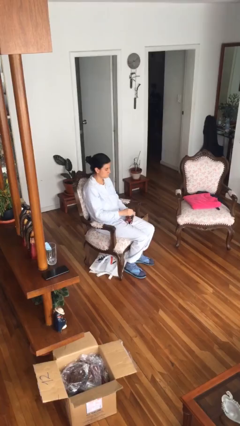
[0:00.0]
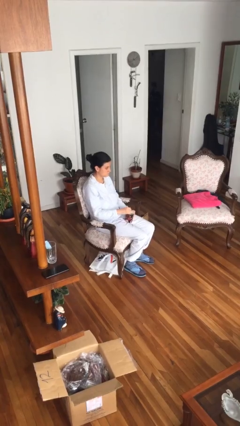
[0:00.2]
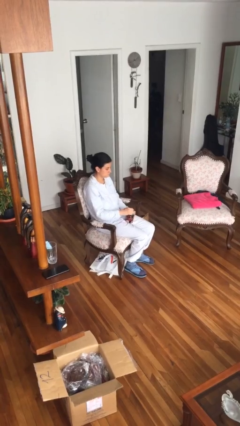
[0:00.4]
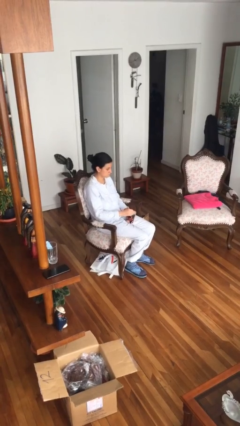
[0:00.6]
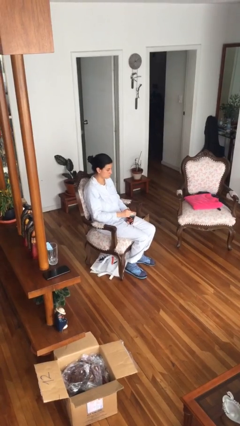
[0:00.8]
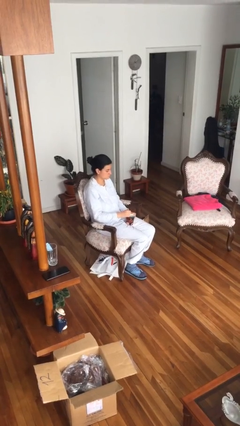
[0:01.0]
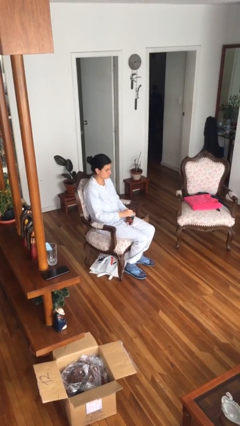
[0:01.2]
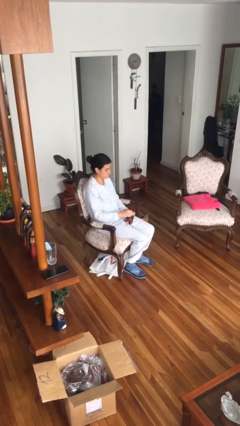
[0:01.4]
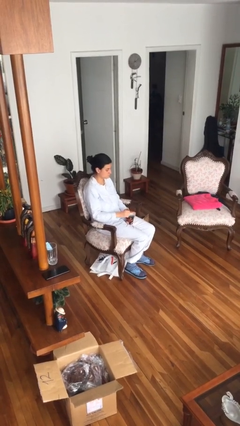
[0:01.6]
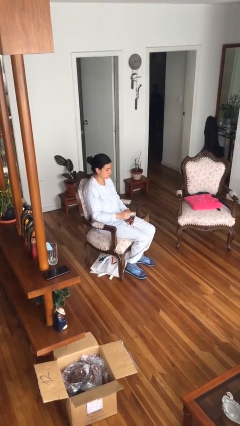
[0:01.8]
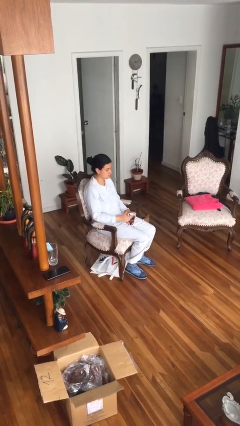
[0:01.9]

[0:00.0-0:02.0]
person stirs mug

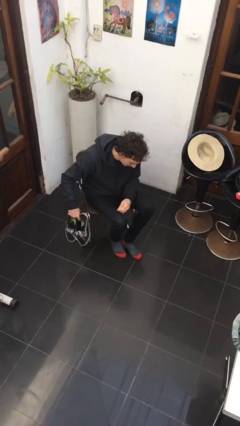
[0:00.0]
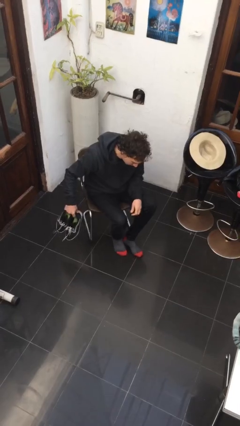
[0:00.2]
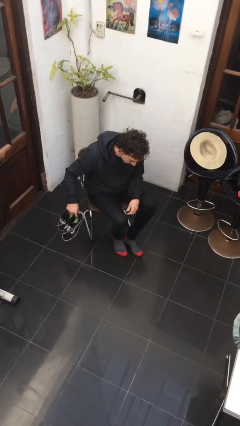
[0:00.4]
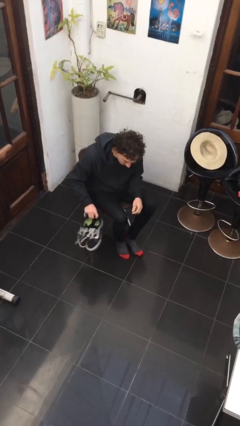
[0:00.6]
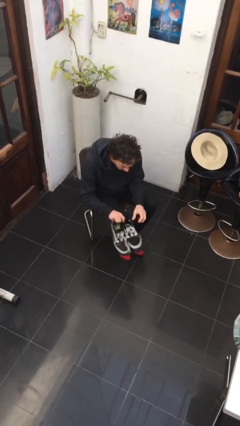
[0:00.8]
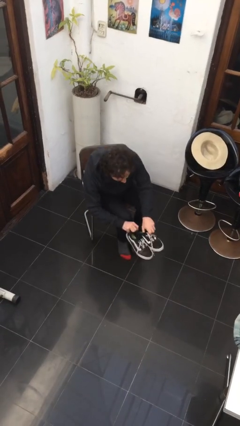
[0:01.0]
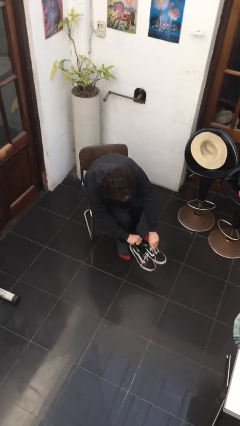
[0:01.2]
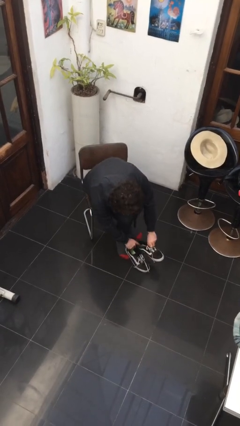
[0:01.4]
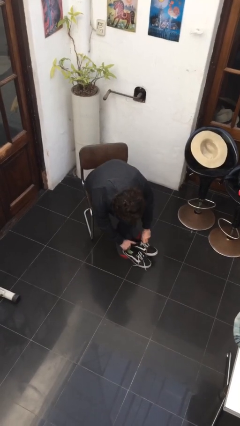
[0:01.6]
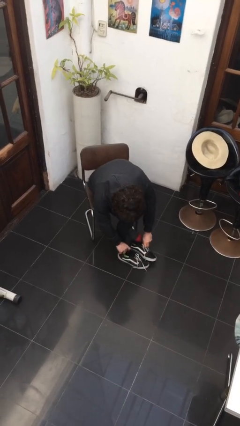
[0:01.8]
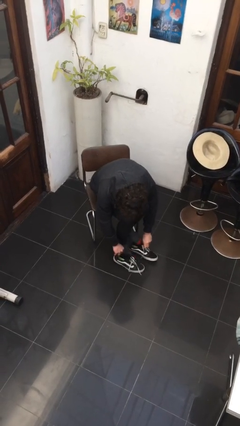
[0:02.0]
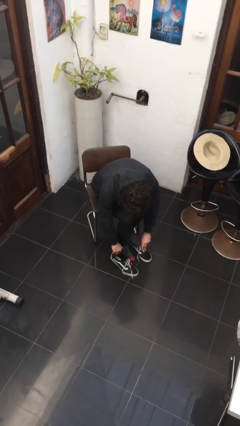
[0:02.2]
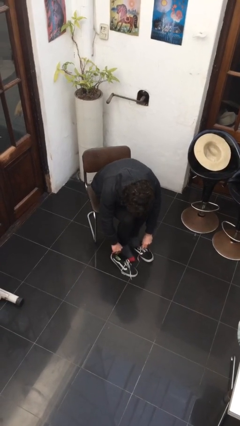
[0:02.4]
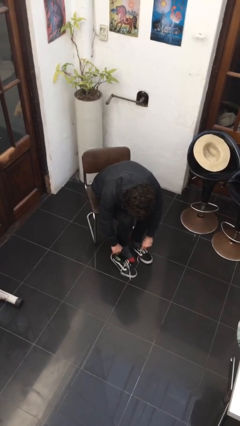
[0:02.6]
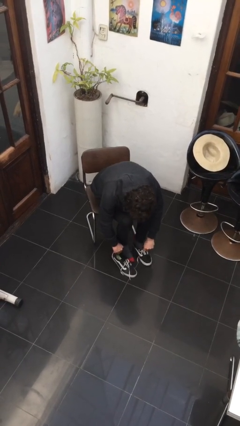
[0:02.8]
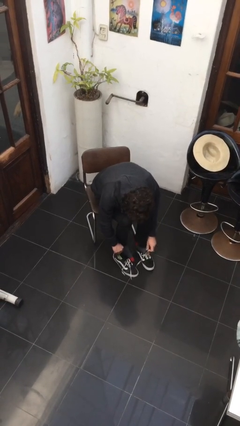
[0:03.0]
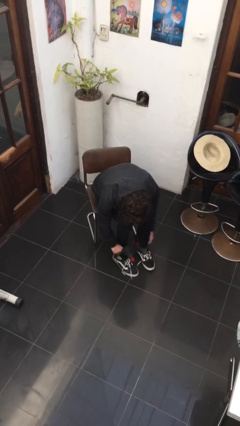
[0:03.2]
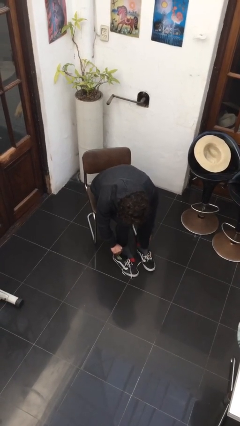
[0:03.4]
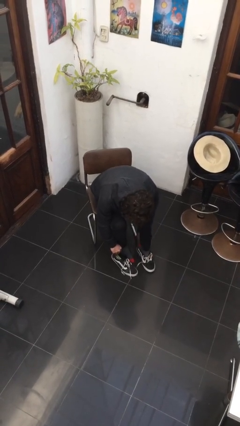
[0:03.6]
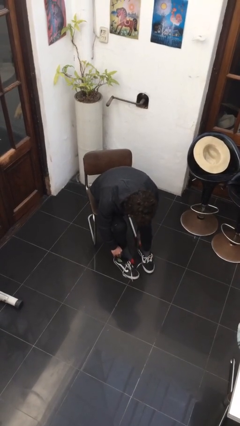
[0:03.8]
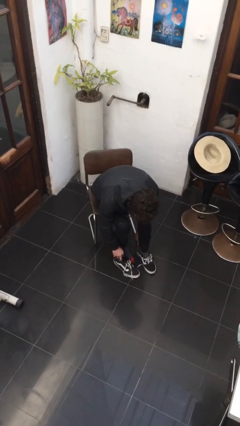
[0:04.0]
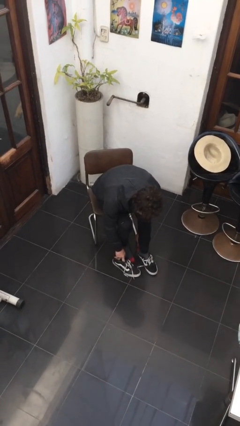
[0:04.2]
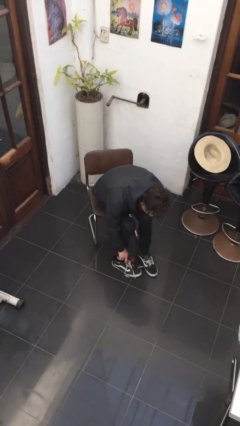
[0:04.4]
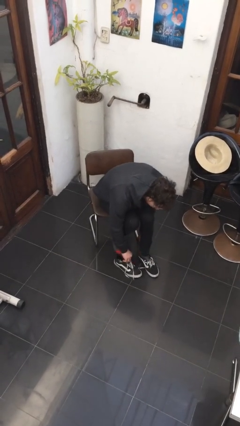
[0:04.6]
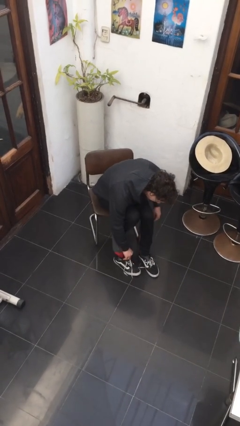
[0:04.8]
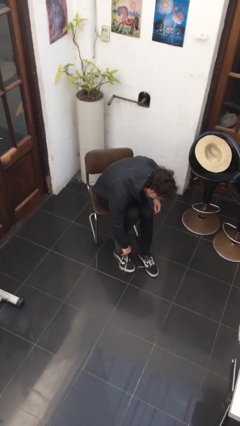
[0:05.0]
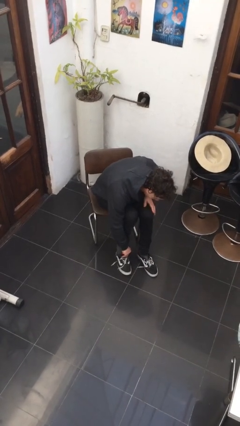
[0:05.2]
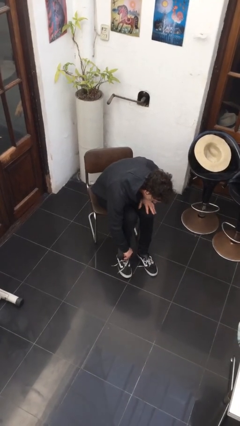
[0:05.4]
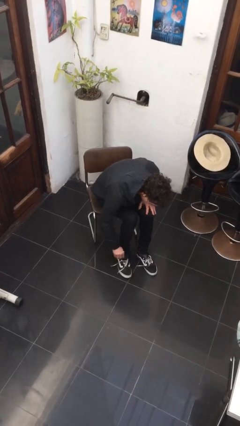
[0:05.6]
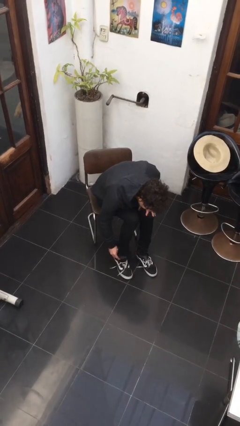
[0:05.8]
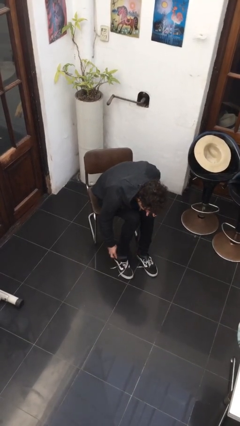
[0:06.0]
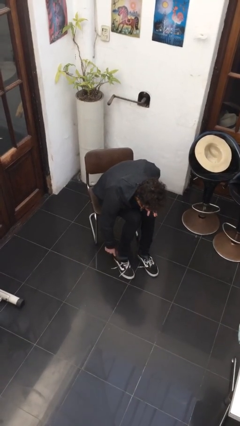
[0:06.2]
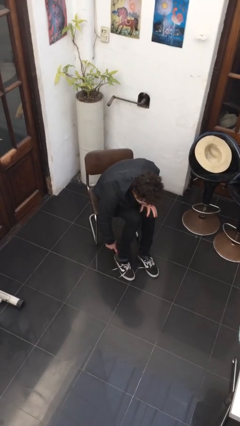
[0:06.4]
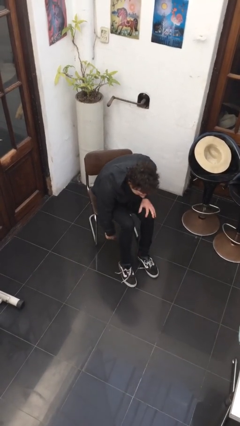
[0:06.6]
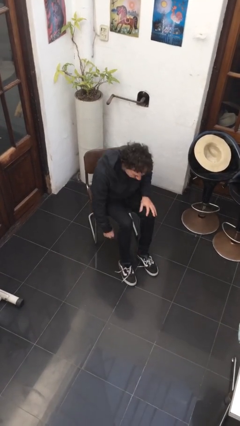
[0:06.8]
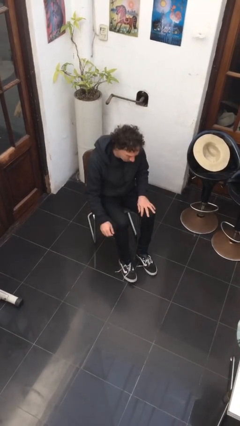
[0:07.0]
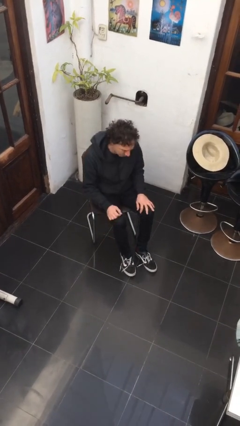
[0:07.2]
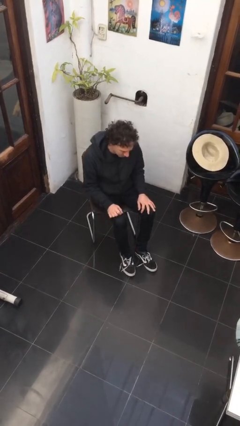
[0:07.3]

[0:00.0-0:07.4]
person puts on shoes

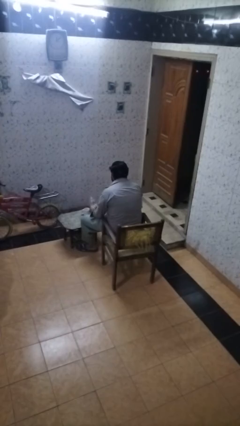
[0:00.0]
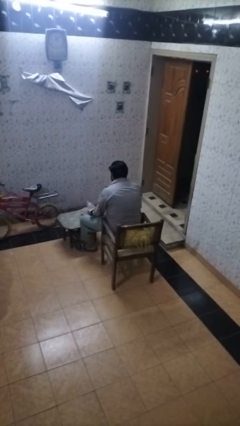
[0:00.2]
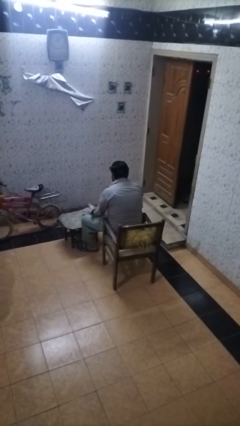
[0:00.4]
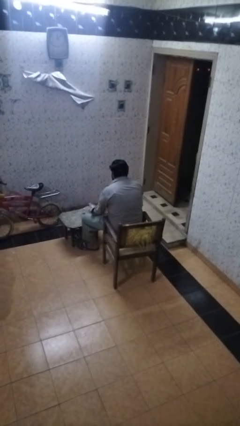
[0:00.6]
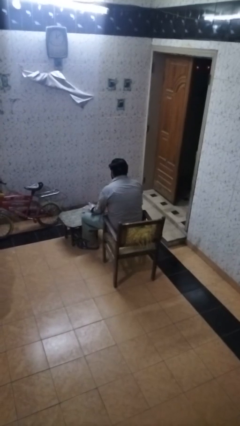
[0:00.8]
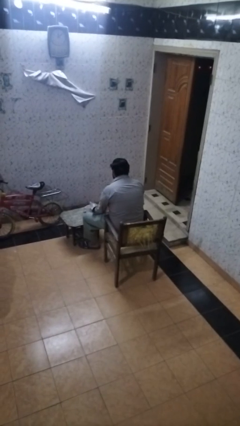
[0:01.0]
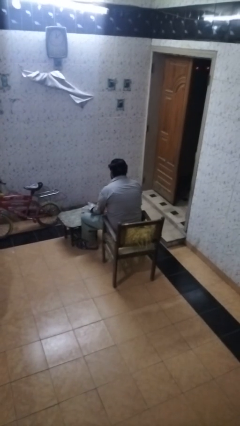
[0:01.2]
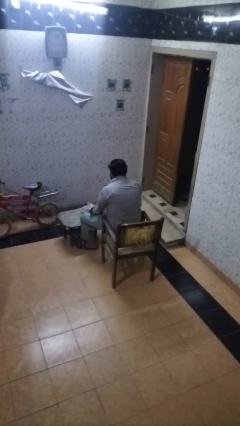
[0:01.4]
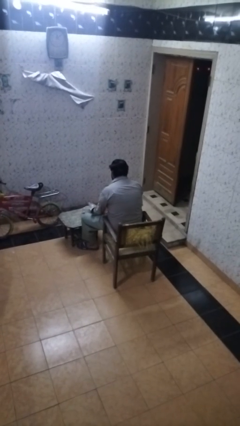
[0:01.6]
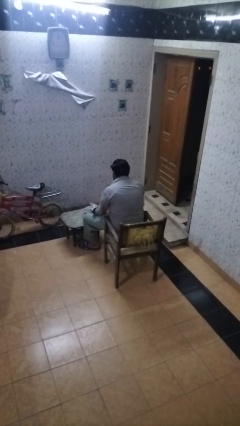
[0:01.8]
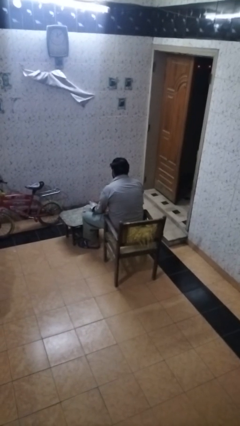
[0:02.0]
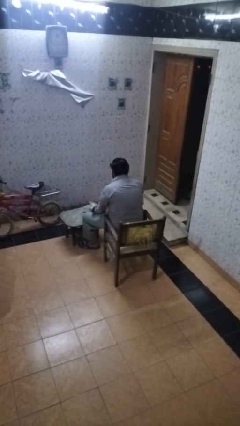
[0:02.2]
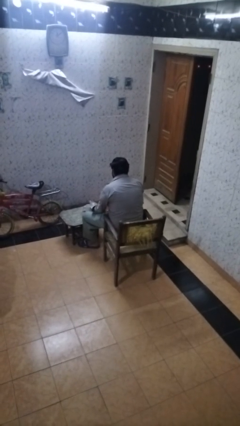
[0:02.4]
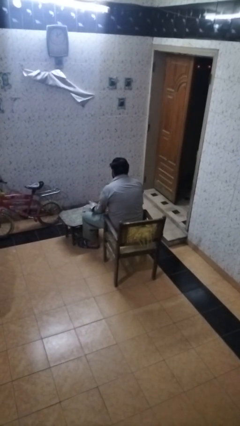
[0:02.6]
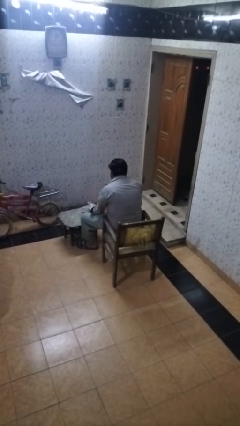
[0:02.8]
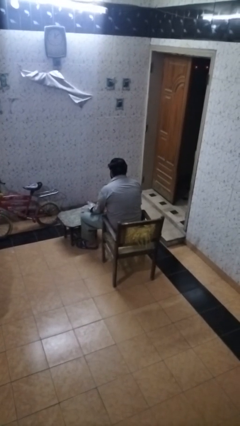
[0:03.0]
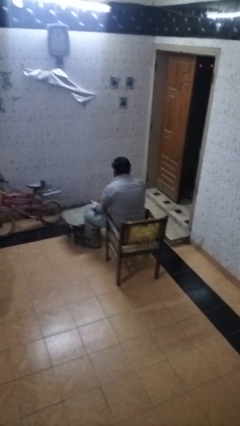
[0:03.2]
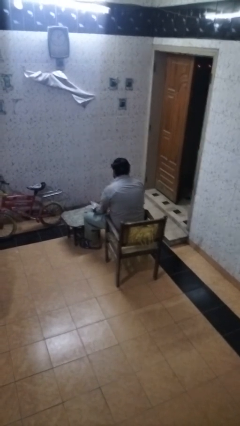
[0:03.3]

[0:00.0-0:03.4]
person pours liquid into cup

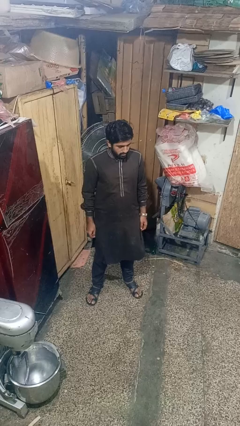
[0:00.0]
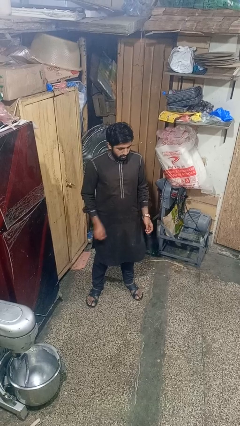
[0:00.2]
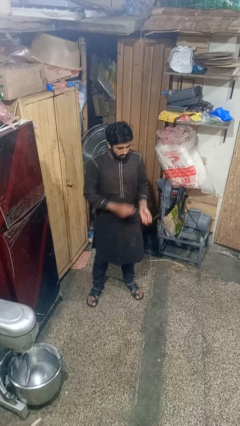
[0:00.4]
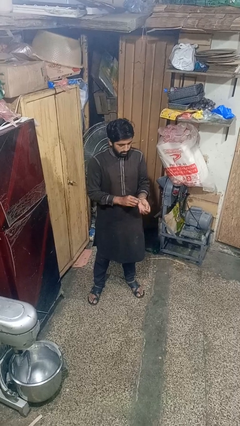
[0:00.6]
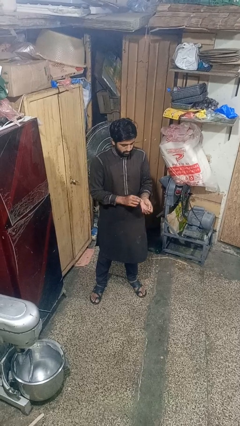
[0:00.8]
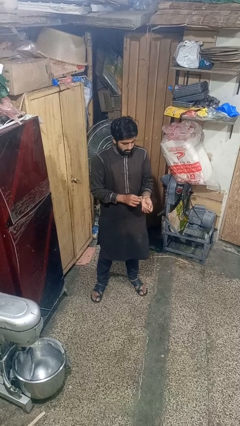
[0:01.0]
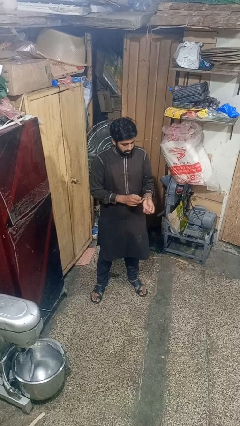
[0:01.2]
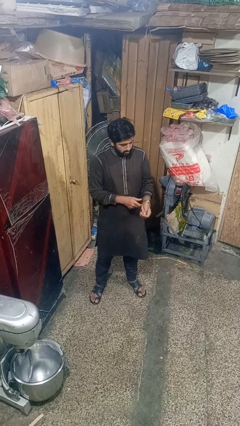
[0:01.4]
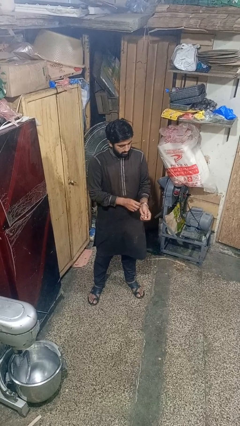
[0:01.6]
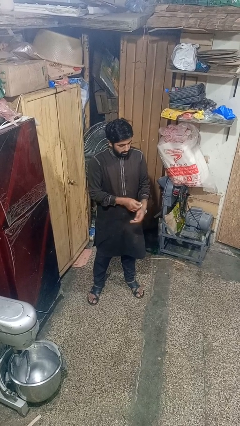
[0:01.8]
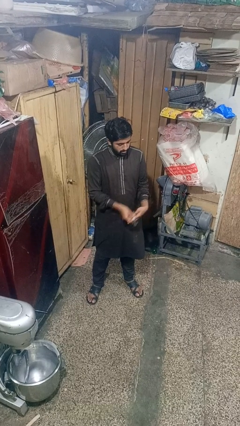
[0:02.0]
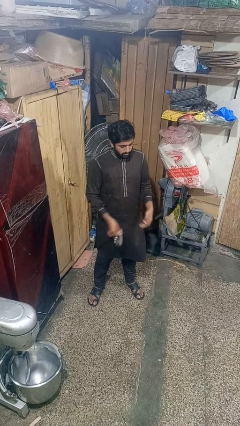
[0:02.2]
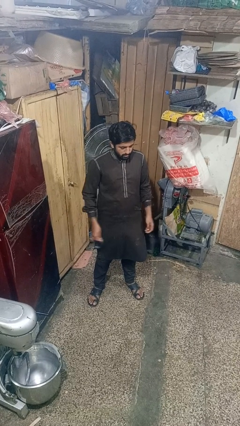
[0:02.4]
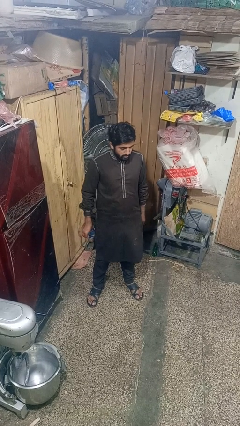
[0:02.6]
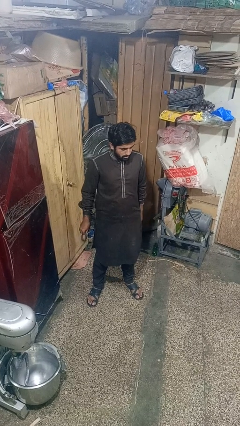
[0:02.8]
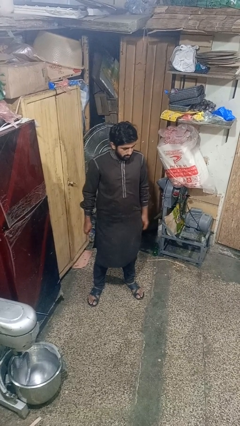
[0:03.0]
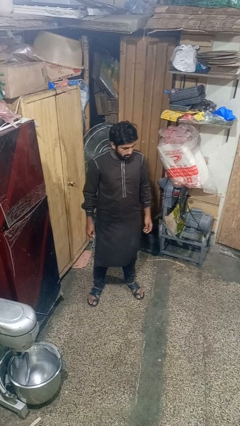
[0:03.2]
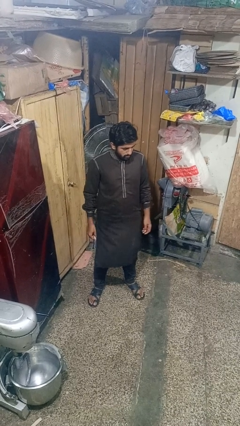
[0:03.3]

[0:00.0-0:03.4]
person takes off wristwatch

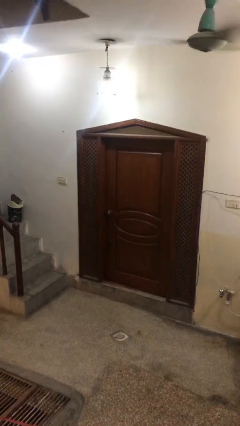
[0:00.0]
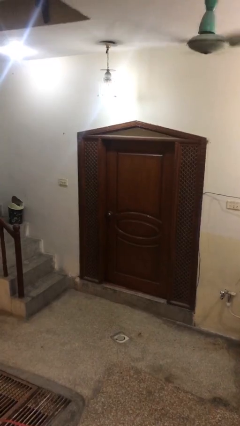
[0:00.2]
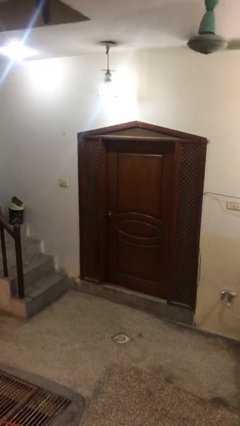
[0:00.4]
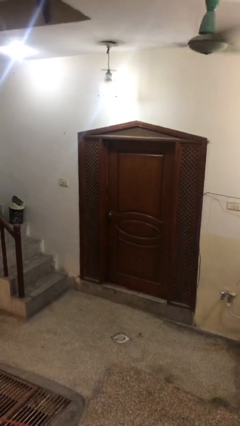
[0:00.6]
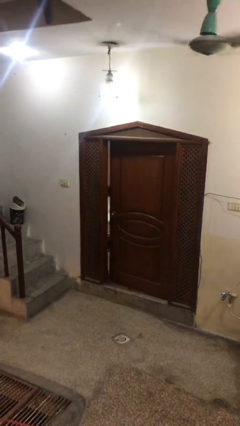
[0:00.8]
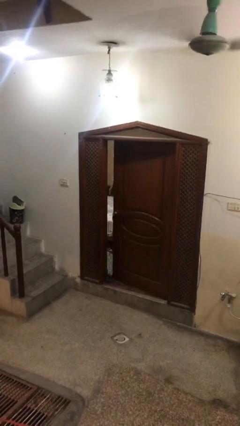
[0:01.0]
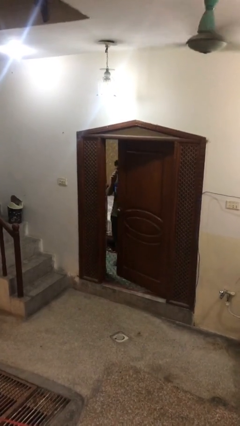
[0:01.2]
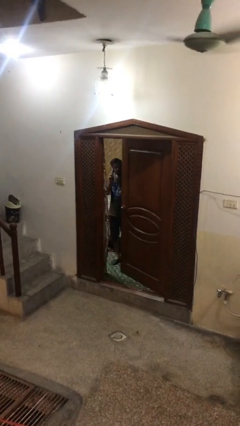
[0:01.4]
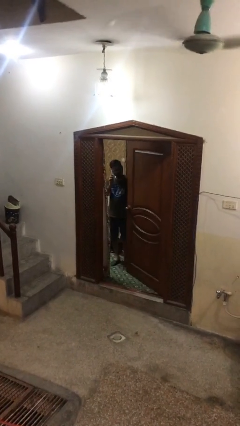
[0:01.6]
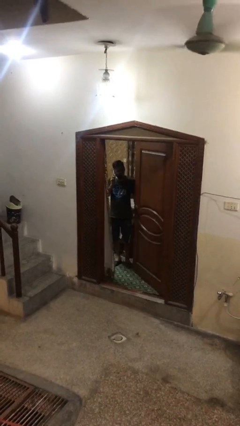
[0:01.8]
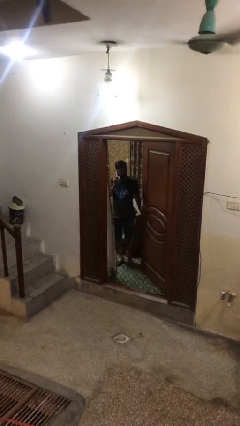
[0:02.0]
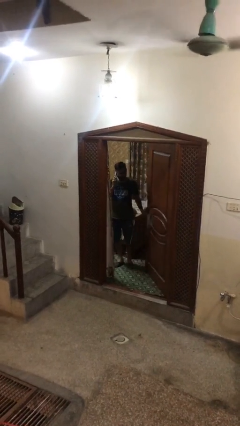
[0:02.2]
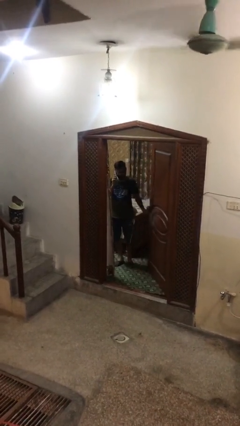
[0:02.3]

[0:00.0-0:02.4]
person opens facility door
